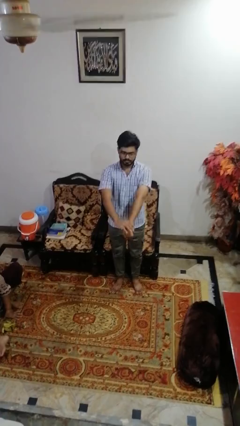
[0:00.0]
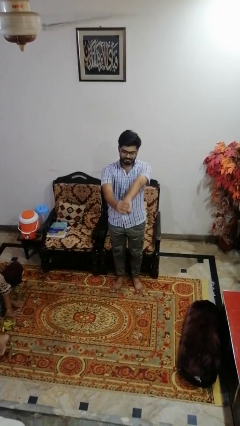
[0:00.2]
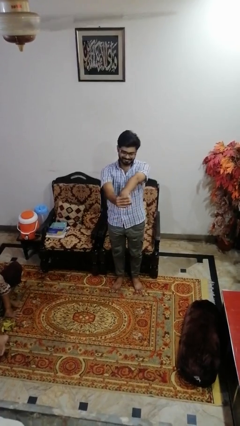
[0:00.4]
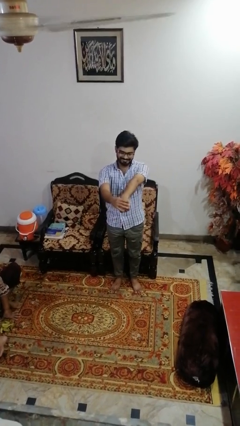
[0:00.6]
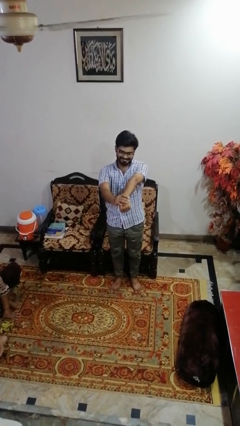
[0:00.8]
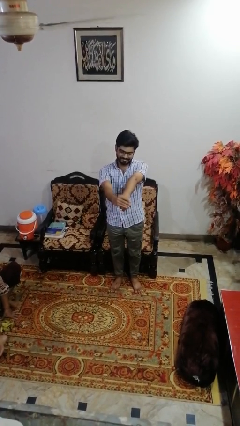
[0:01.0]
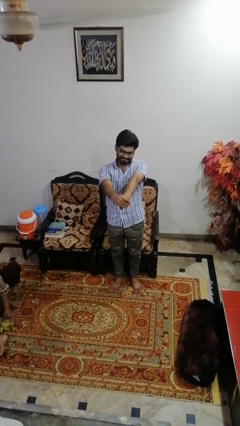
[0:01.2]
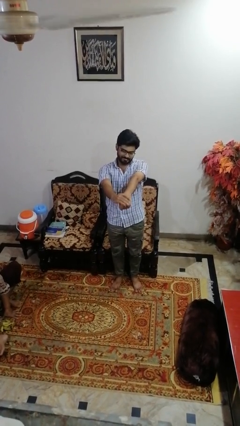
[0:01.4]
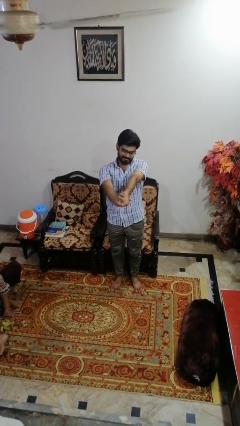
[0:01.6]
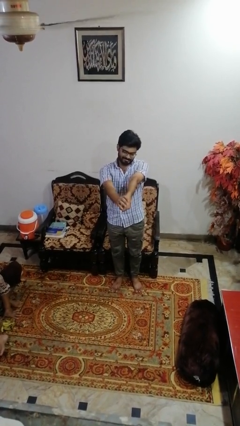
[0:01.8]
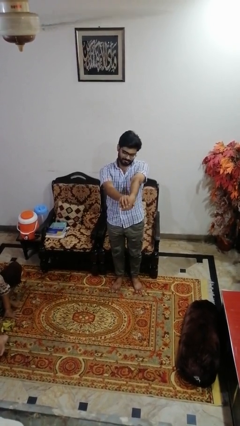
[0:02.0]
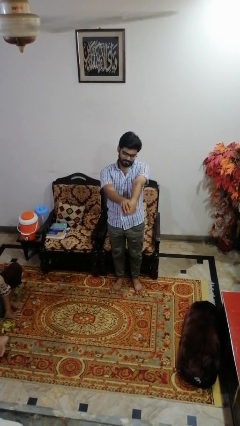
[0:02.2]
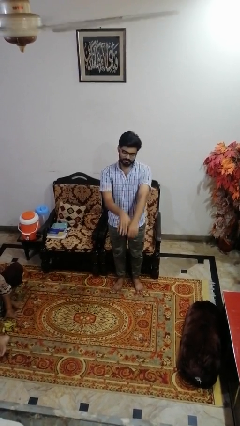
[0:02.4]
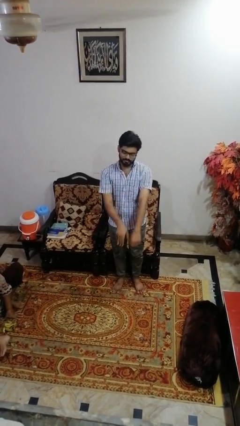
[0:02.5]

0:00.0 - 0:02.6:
person cracks knuckles

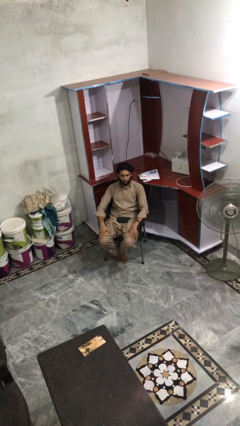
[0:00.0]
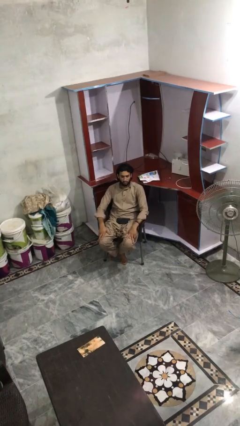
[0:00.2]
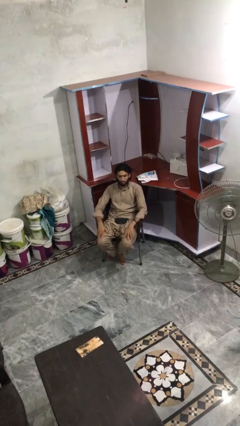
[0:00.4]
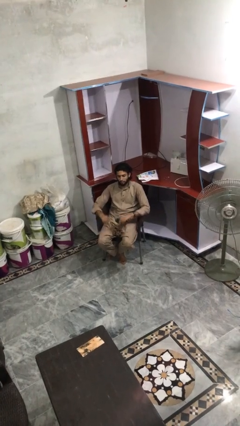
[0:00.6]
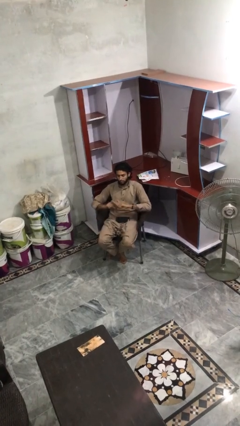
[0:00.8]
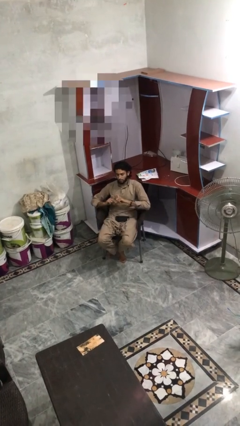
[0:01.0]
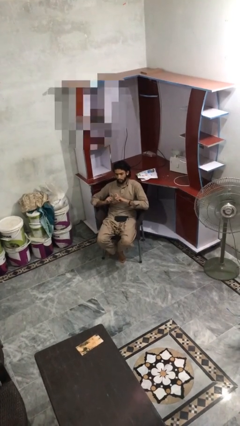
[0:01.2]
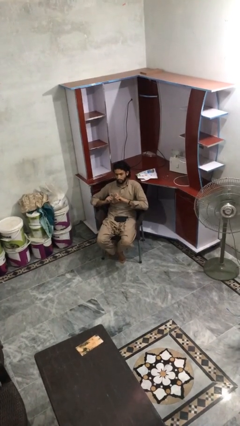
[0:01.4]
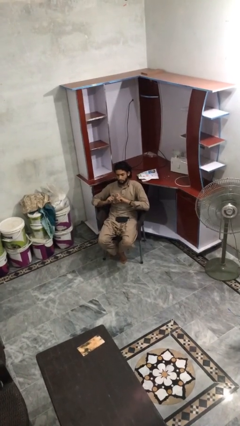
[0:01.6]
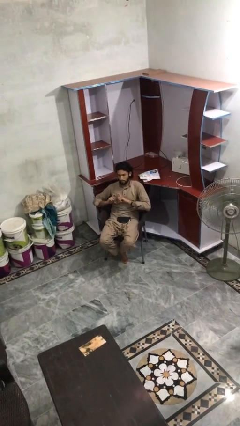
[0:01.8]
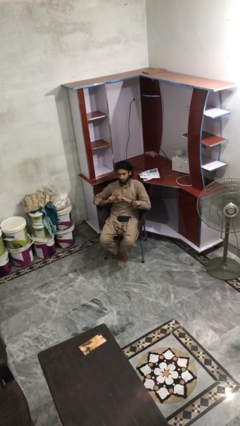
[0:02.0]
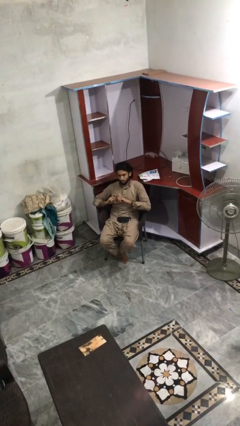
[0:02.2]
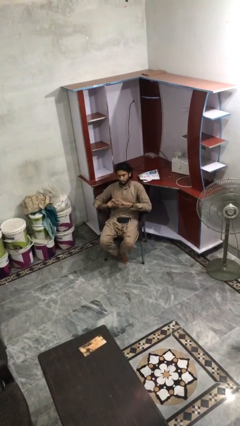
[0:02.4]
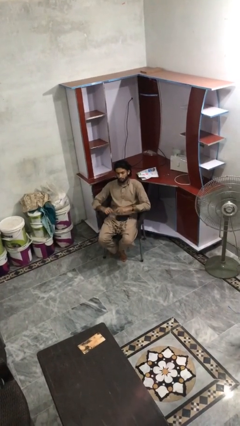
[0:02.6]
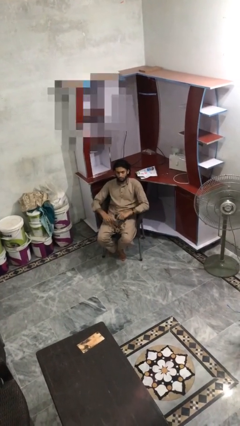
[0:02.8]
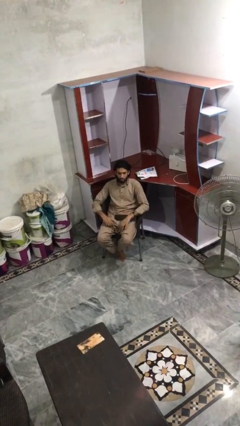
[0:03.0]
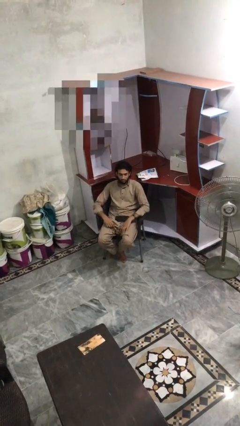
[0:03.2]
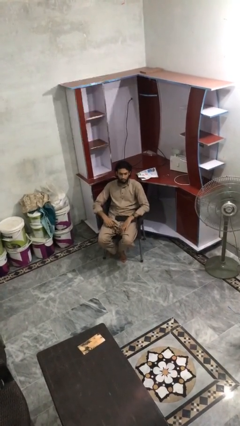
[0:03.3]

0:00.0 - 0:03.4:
person gestures heart

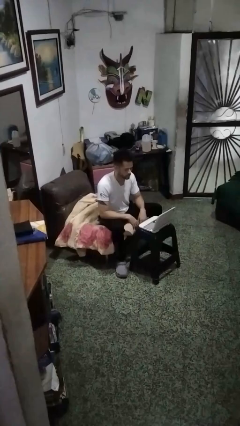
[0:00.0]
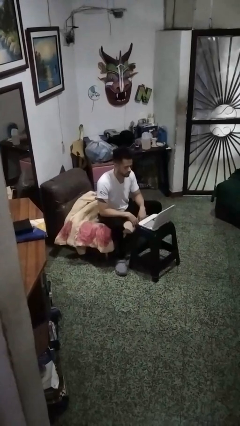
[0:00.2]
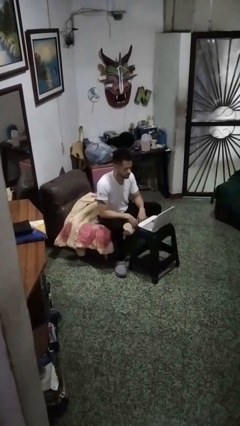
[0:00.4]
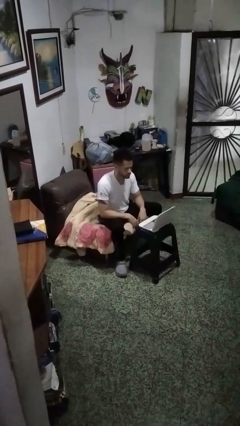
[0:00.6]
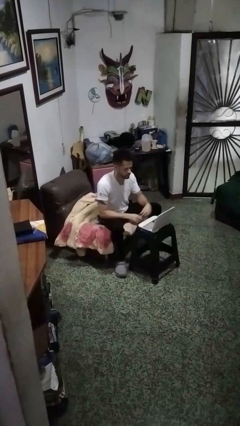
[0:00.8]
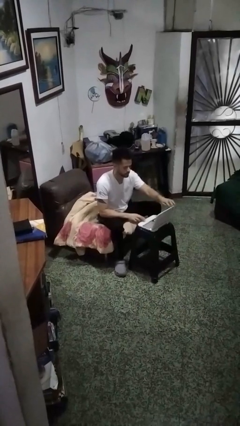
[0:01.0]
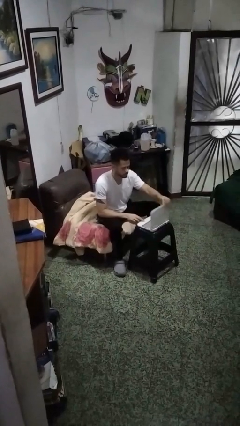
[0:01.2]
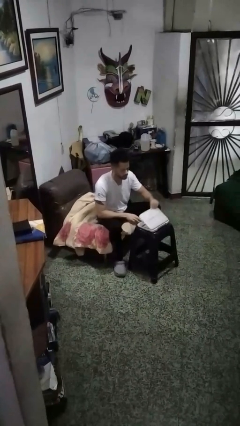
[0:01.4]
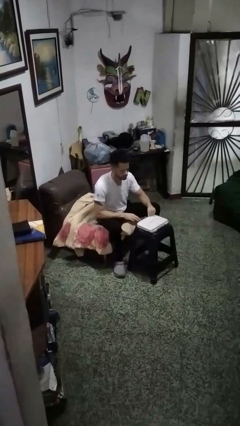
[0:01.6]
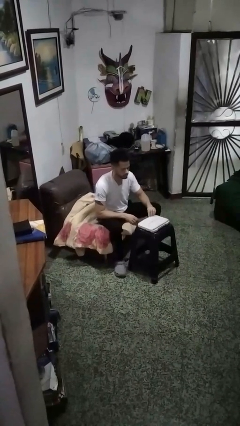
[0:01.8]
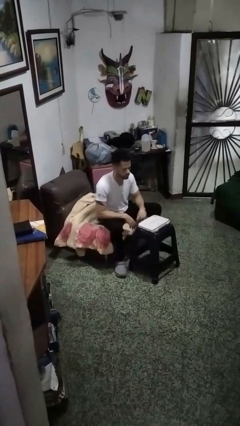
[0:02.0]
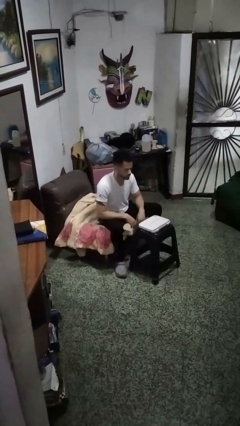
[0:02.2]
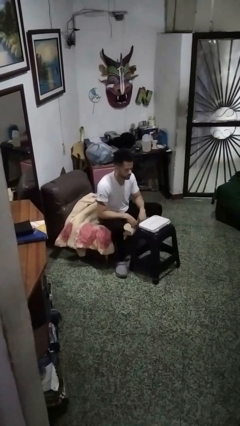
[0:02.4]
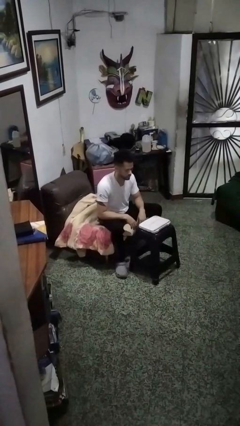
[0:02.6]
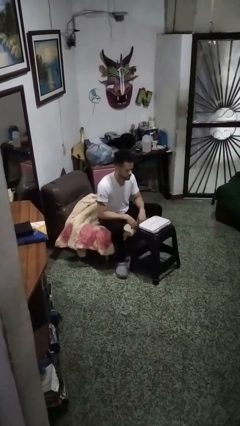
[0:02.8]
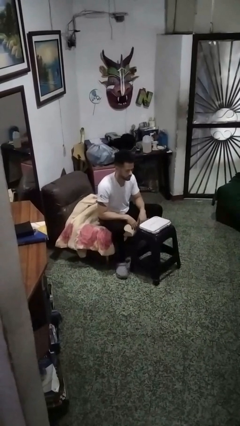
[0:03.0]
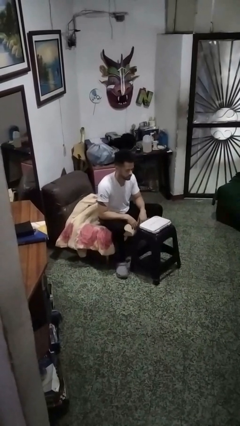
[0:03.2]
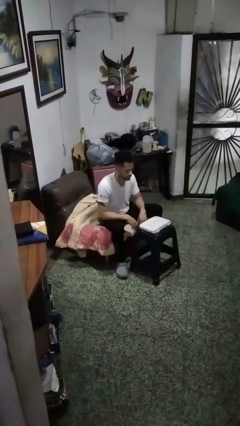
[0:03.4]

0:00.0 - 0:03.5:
person closes laptop

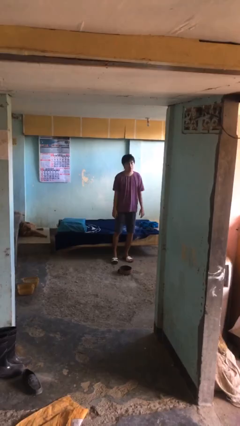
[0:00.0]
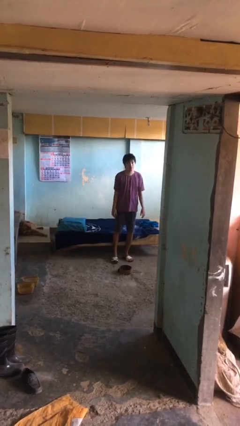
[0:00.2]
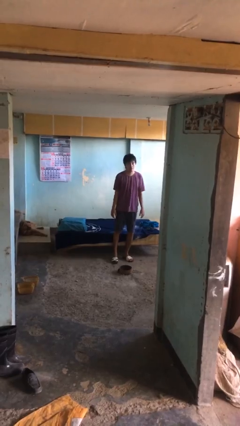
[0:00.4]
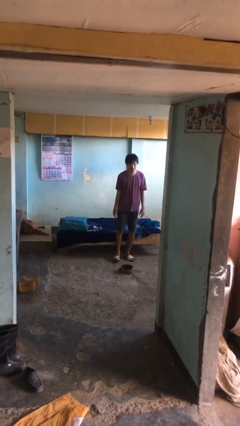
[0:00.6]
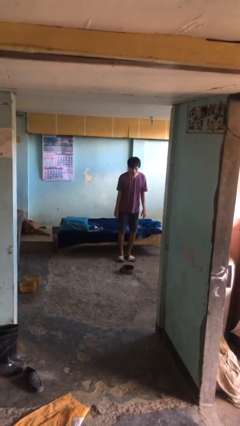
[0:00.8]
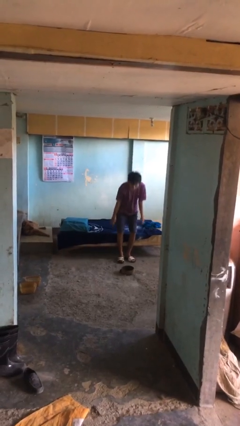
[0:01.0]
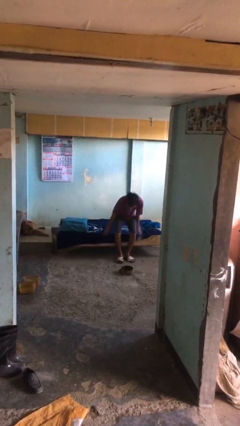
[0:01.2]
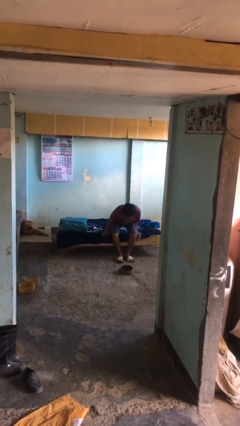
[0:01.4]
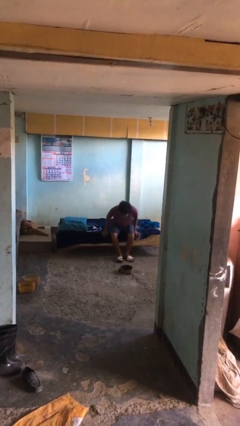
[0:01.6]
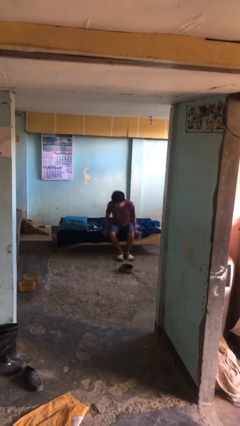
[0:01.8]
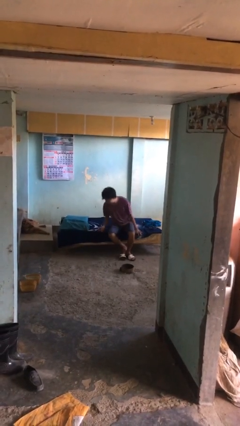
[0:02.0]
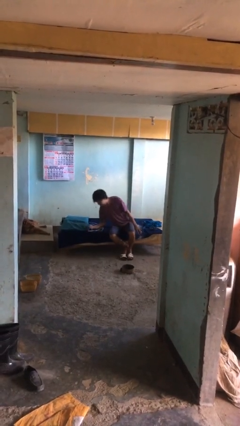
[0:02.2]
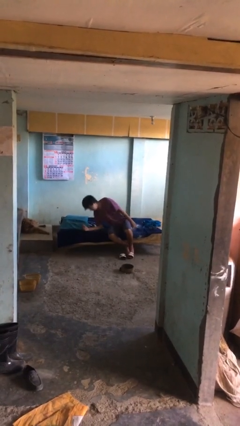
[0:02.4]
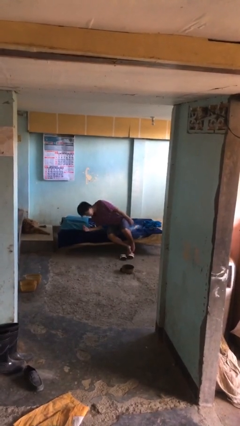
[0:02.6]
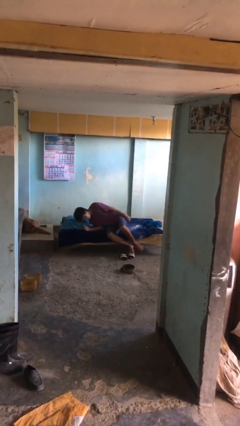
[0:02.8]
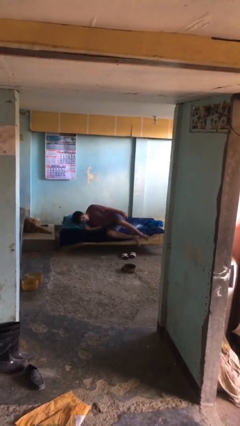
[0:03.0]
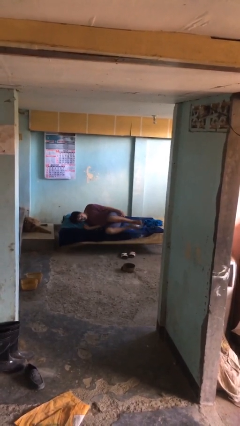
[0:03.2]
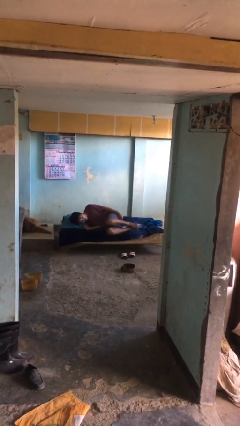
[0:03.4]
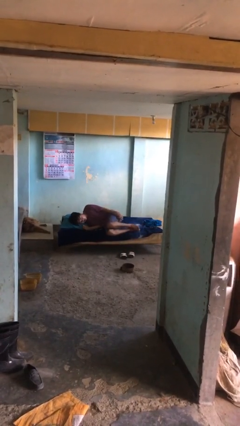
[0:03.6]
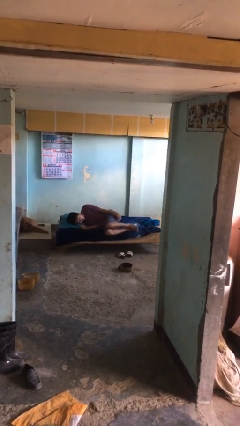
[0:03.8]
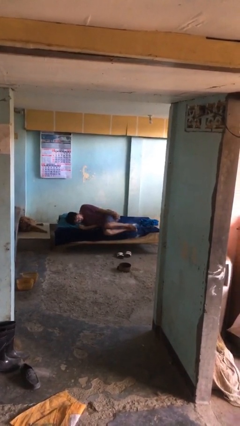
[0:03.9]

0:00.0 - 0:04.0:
person lies down on bed

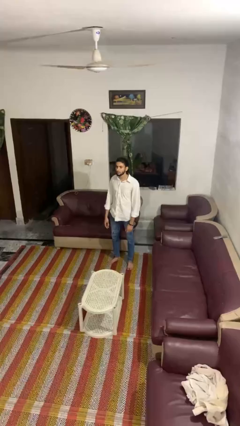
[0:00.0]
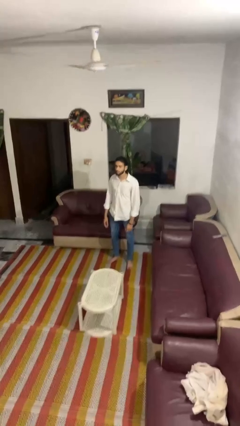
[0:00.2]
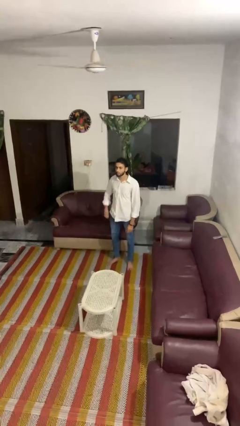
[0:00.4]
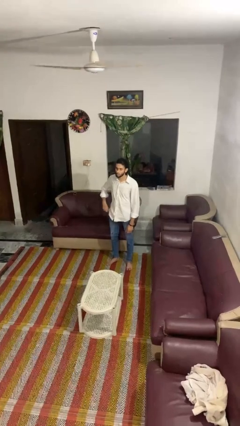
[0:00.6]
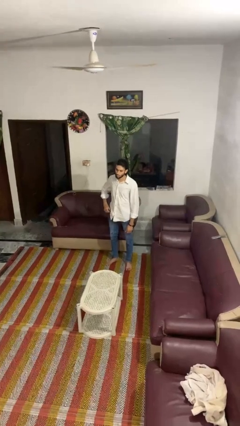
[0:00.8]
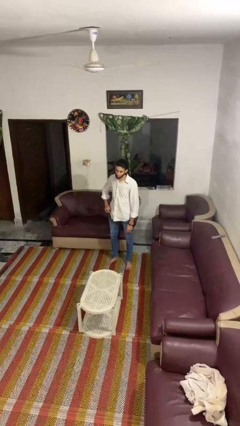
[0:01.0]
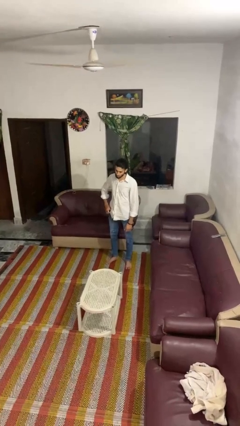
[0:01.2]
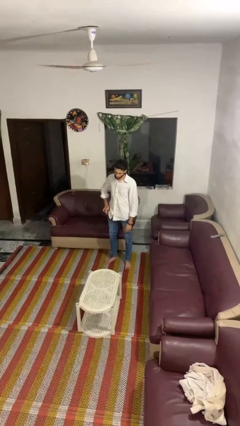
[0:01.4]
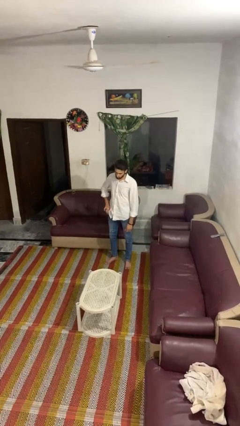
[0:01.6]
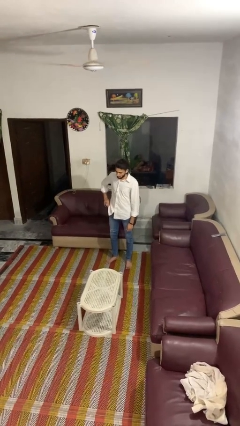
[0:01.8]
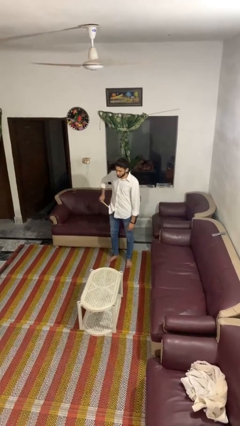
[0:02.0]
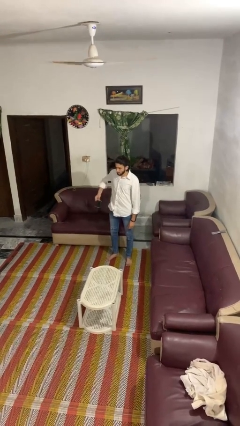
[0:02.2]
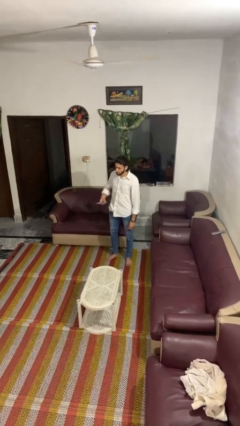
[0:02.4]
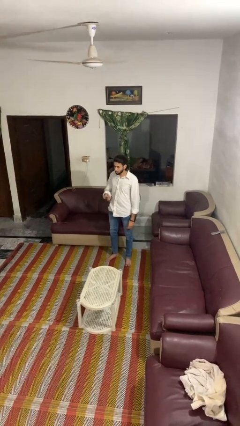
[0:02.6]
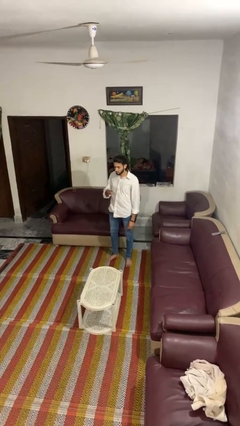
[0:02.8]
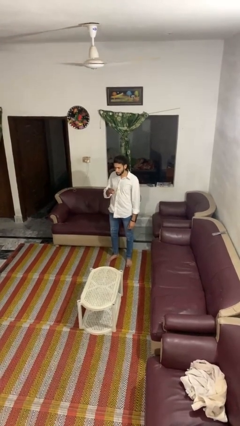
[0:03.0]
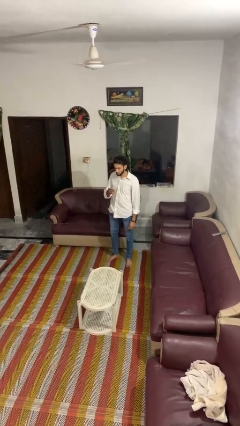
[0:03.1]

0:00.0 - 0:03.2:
person takes phone from pocket

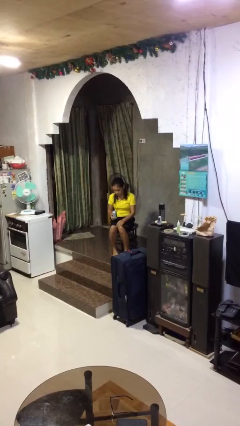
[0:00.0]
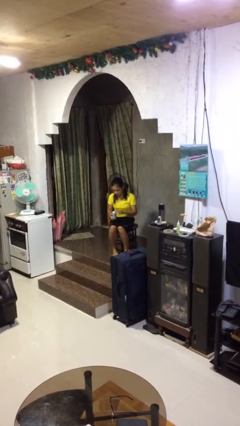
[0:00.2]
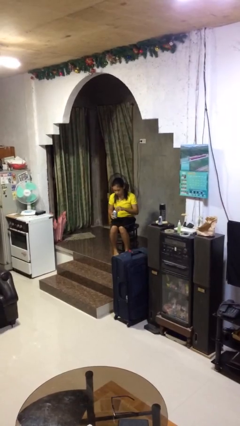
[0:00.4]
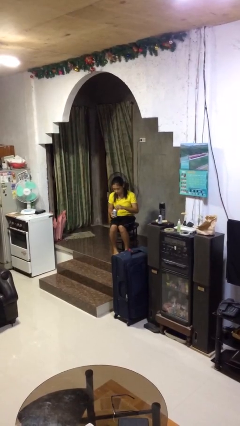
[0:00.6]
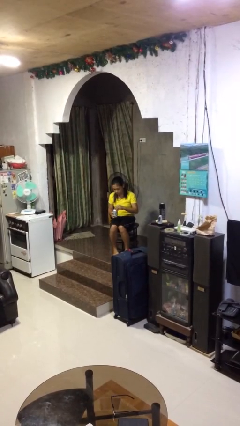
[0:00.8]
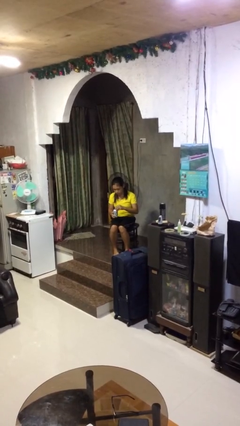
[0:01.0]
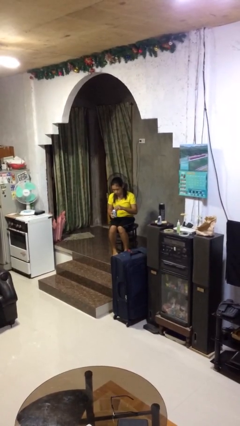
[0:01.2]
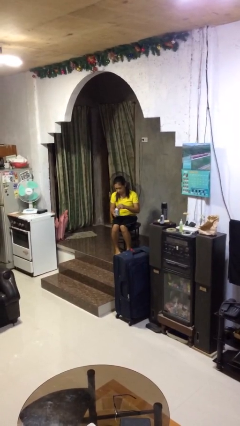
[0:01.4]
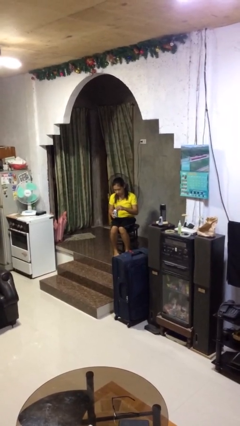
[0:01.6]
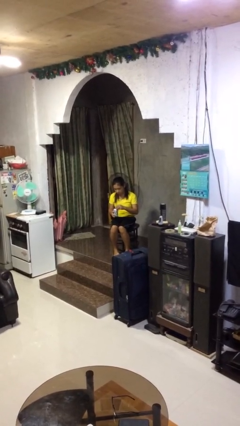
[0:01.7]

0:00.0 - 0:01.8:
person opens beverage can
